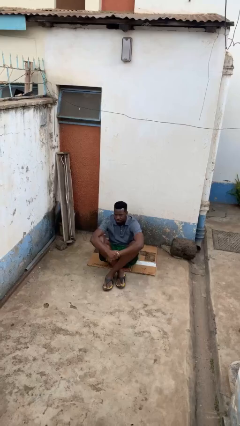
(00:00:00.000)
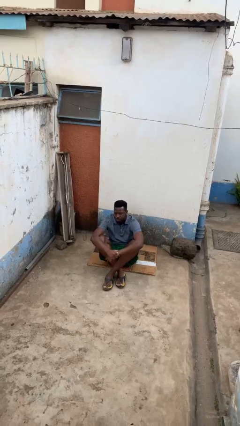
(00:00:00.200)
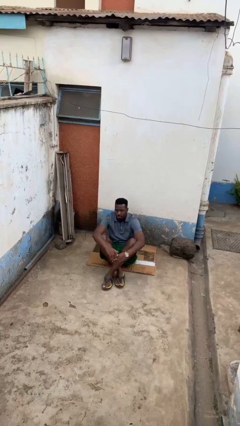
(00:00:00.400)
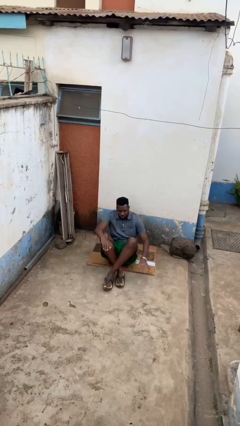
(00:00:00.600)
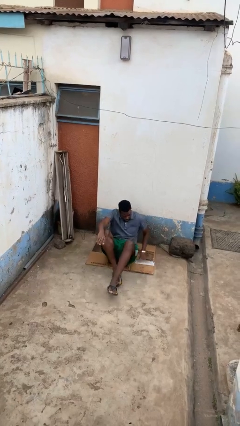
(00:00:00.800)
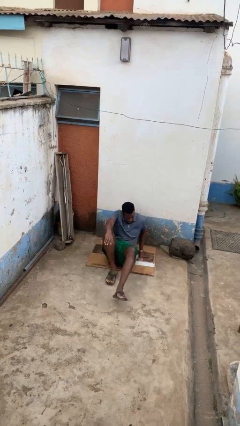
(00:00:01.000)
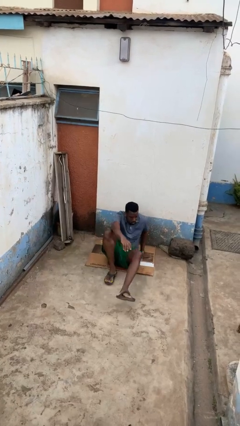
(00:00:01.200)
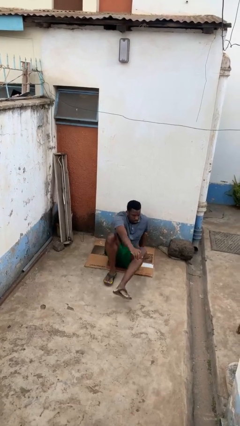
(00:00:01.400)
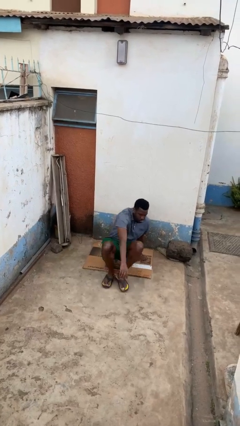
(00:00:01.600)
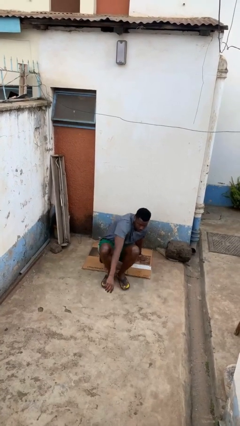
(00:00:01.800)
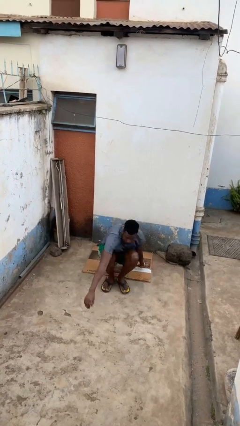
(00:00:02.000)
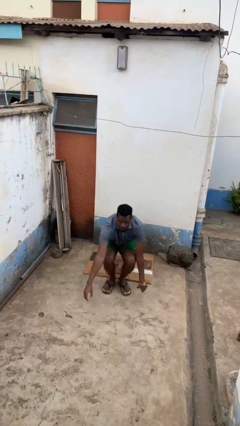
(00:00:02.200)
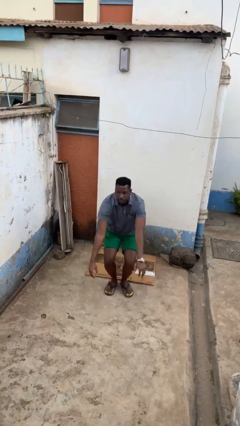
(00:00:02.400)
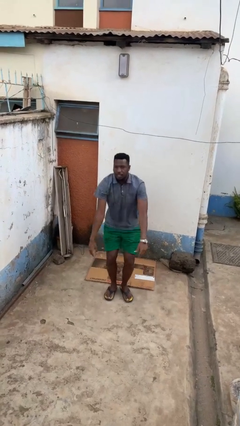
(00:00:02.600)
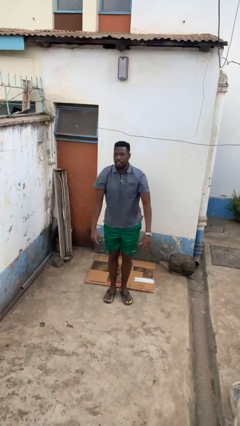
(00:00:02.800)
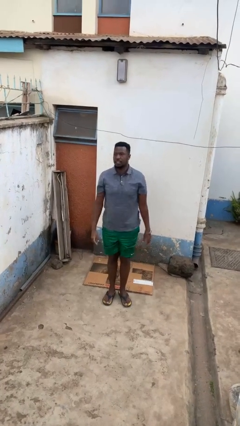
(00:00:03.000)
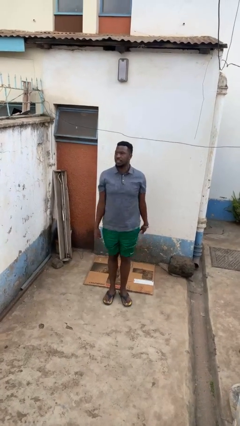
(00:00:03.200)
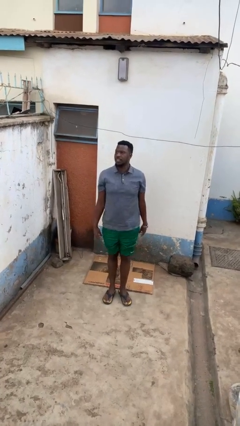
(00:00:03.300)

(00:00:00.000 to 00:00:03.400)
person stands up from floor

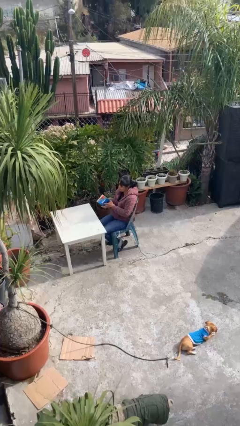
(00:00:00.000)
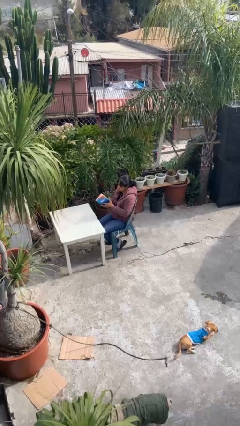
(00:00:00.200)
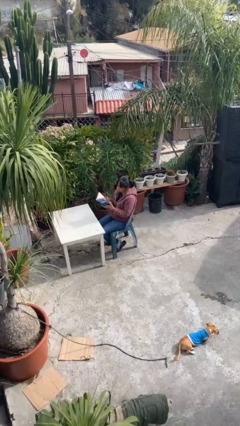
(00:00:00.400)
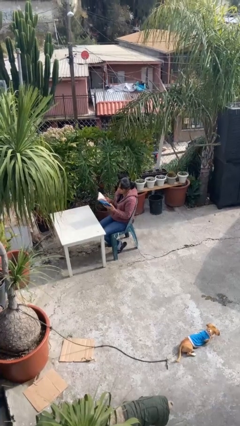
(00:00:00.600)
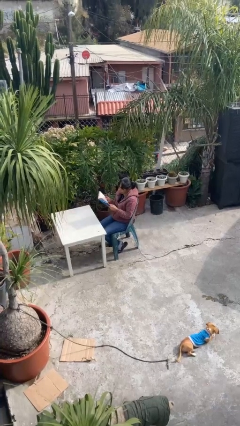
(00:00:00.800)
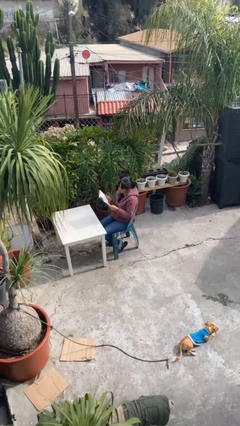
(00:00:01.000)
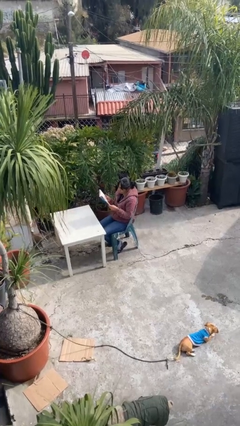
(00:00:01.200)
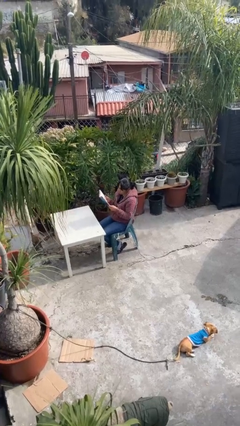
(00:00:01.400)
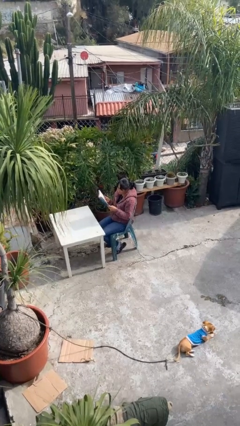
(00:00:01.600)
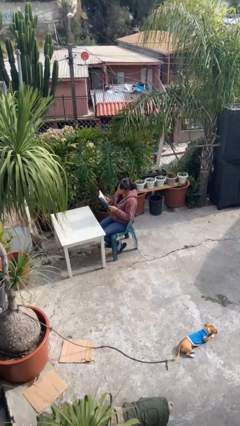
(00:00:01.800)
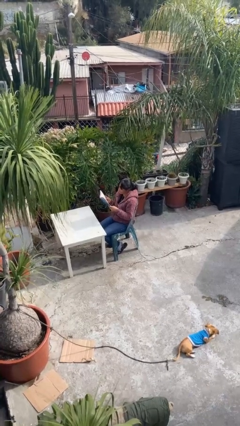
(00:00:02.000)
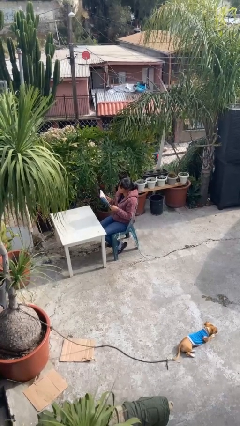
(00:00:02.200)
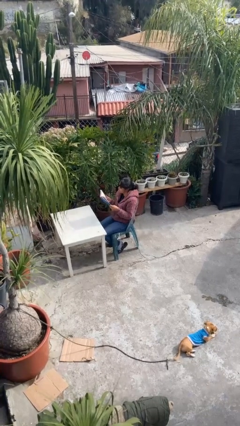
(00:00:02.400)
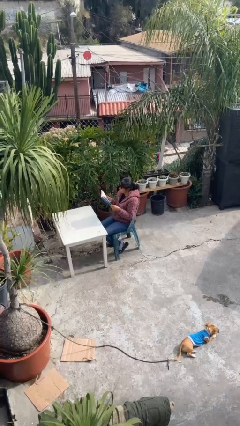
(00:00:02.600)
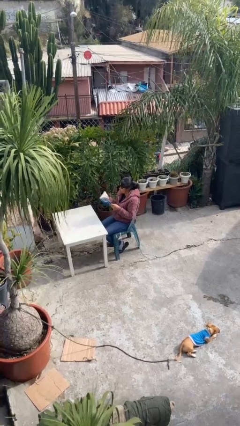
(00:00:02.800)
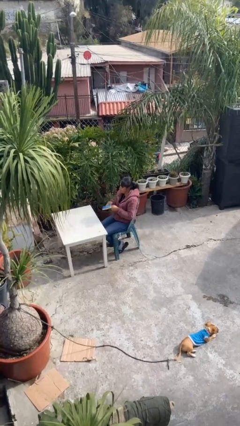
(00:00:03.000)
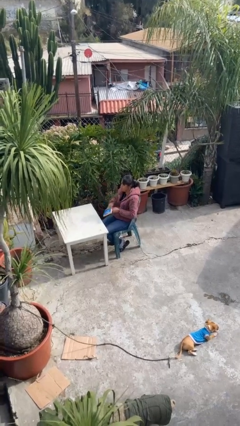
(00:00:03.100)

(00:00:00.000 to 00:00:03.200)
person reads document

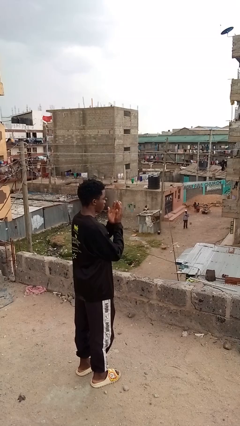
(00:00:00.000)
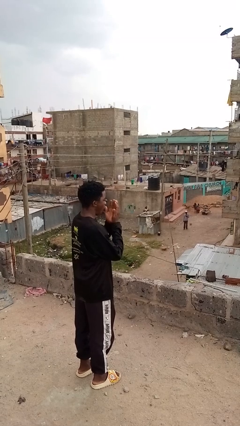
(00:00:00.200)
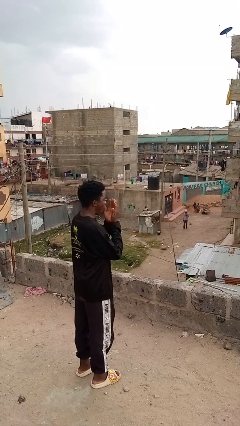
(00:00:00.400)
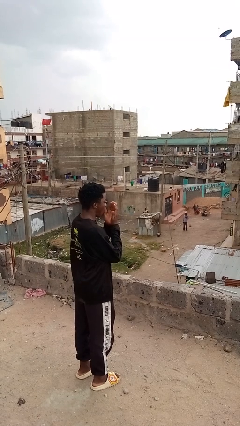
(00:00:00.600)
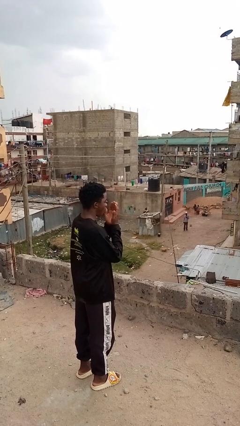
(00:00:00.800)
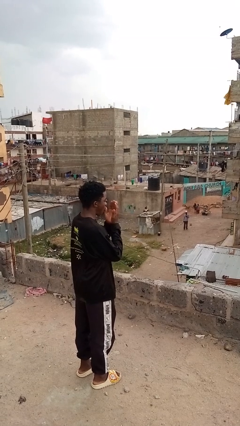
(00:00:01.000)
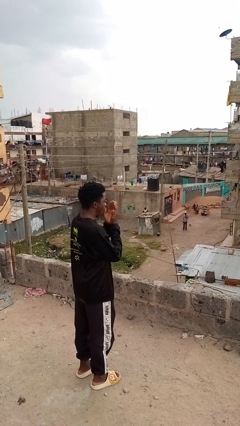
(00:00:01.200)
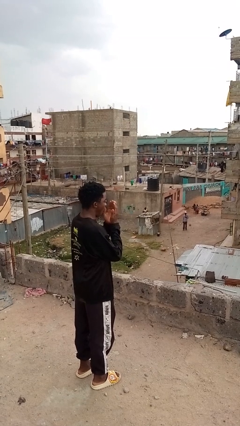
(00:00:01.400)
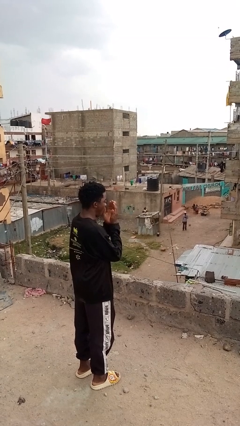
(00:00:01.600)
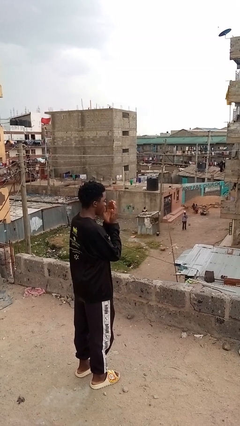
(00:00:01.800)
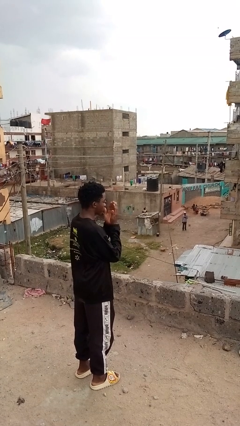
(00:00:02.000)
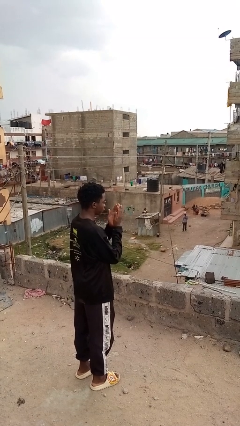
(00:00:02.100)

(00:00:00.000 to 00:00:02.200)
person blows into hands

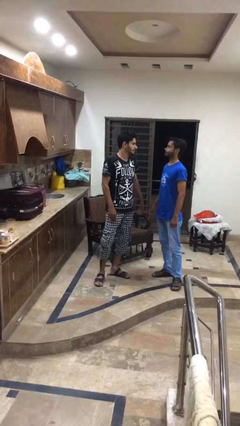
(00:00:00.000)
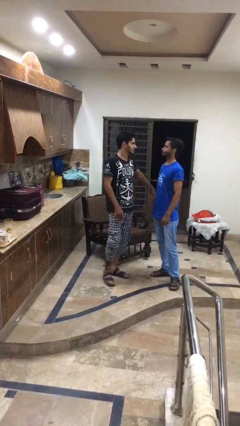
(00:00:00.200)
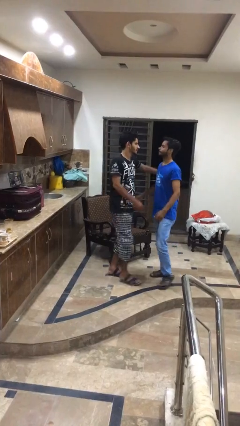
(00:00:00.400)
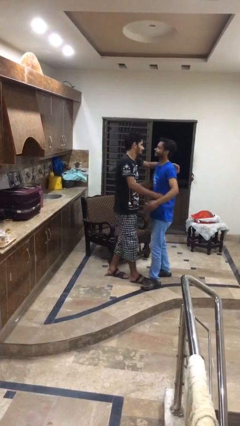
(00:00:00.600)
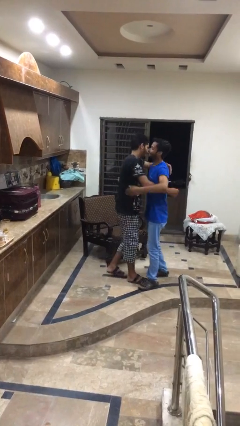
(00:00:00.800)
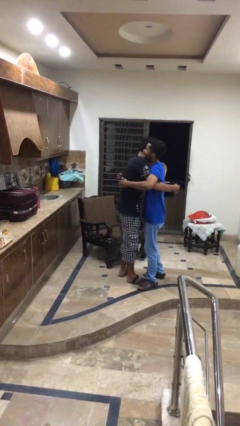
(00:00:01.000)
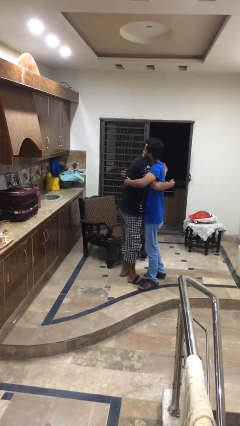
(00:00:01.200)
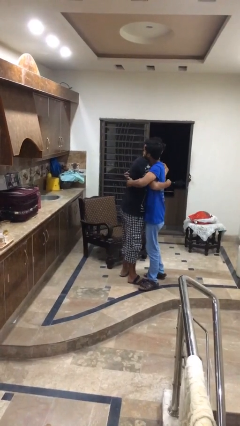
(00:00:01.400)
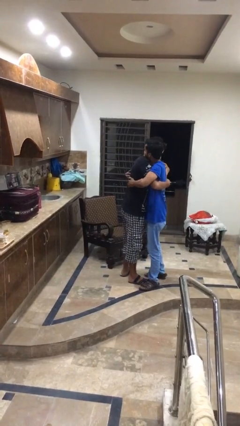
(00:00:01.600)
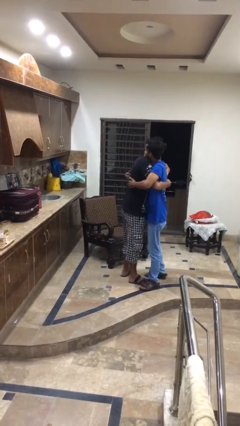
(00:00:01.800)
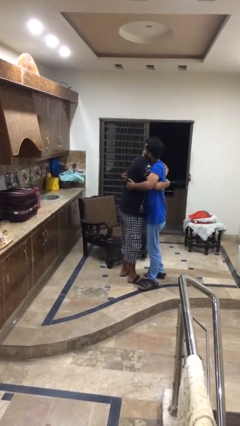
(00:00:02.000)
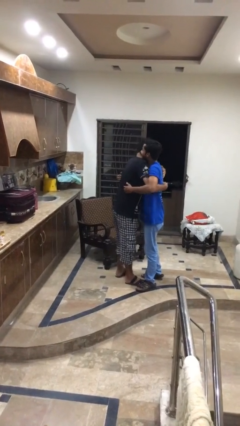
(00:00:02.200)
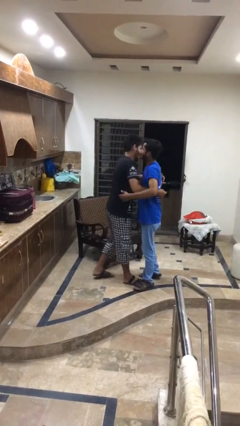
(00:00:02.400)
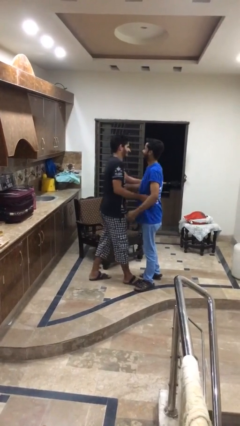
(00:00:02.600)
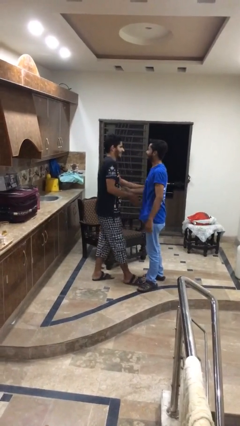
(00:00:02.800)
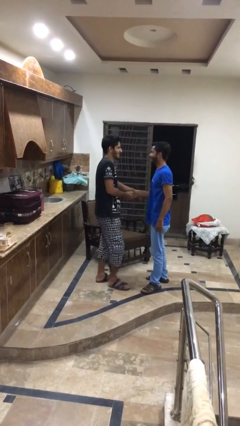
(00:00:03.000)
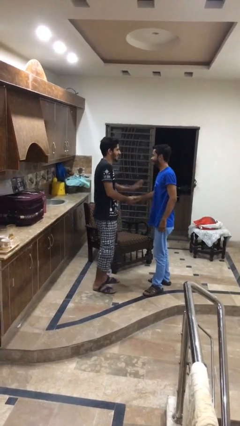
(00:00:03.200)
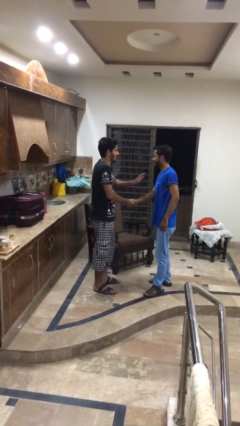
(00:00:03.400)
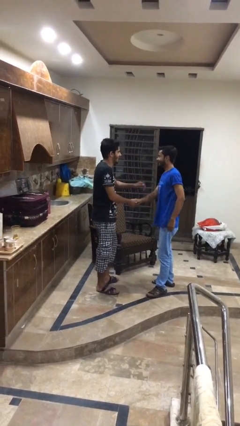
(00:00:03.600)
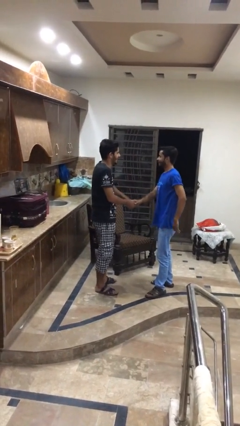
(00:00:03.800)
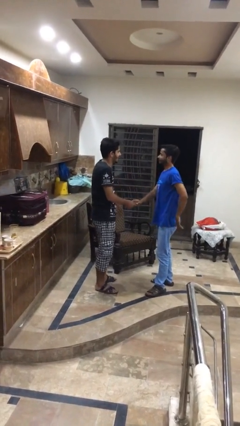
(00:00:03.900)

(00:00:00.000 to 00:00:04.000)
person embraces person

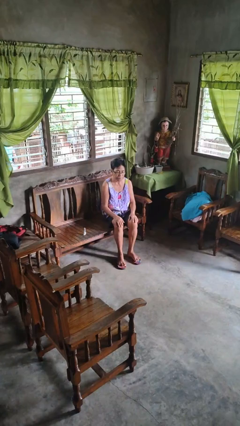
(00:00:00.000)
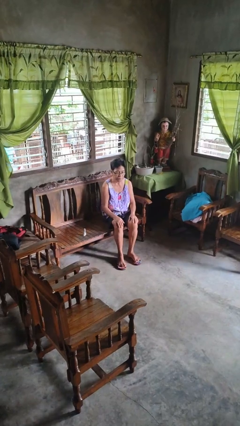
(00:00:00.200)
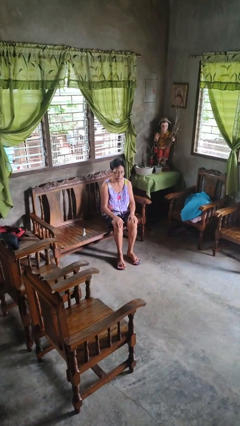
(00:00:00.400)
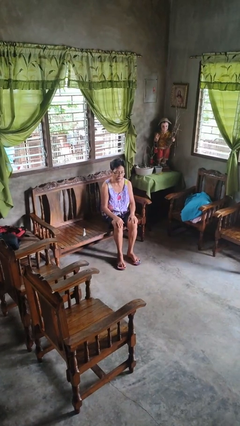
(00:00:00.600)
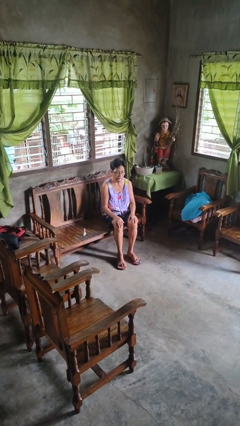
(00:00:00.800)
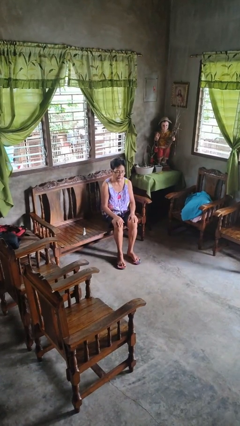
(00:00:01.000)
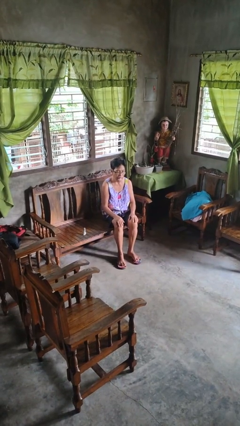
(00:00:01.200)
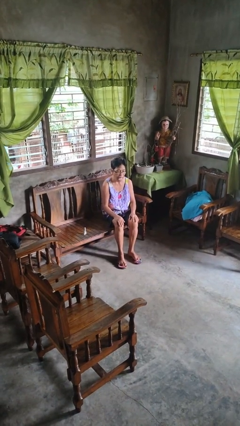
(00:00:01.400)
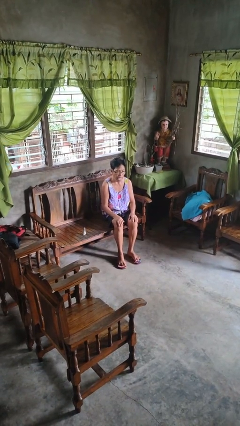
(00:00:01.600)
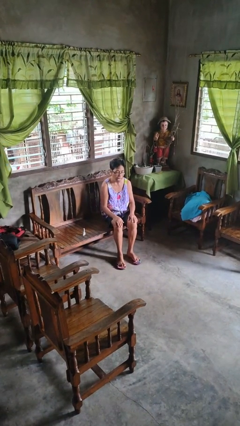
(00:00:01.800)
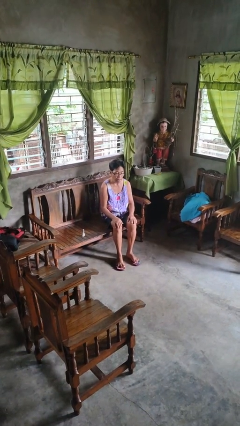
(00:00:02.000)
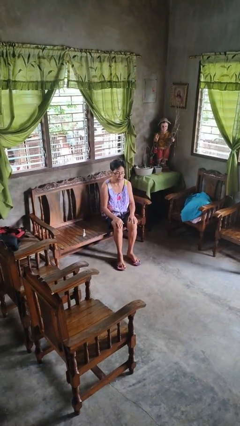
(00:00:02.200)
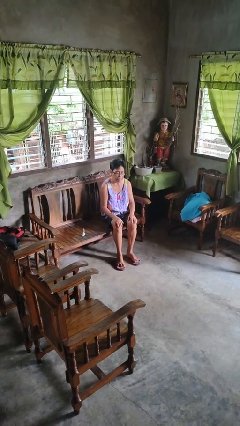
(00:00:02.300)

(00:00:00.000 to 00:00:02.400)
person sticks out tongue

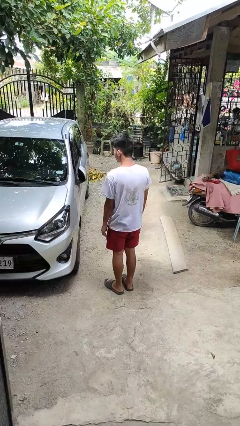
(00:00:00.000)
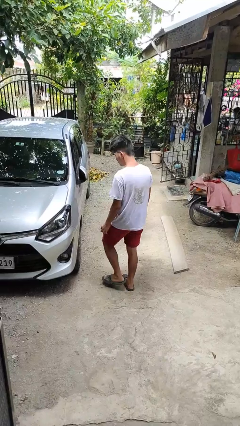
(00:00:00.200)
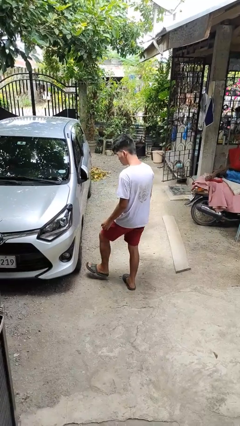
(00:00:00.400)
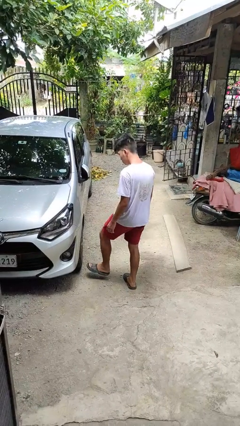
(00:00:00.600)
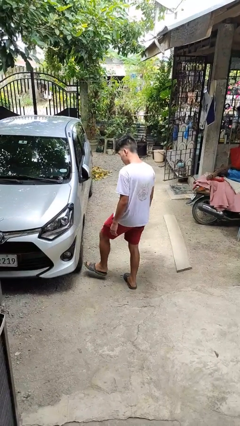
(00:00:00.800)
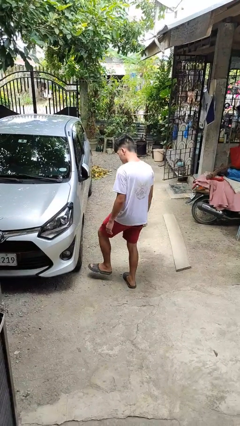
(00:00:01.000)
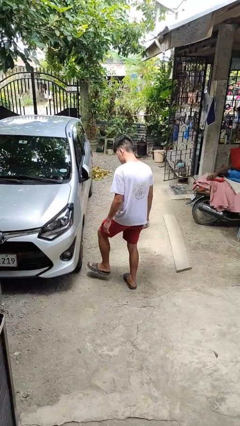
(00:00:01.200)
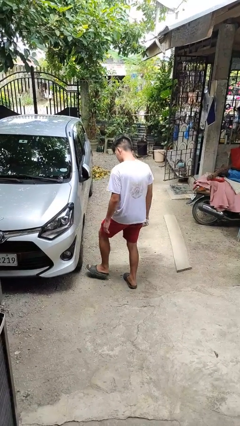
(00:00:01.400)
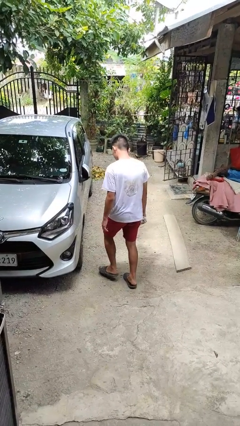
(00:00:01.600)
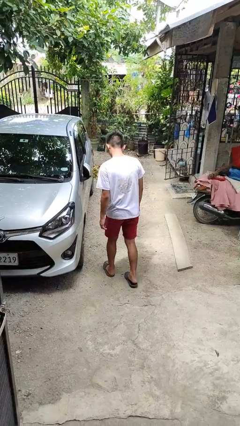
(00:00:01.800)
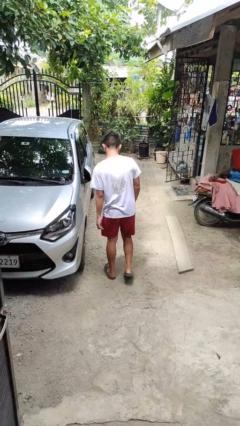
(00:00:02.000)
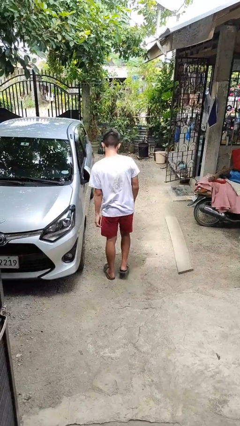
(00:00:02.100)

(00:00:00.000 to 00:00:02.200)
person kicks car tires
